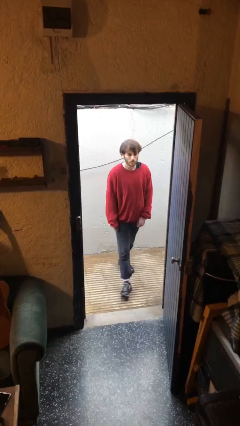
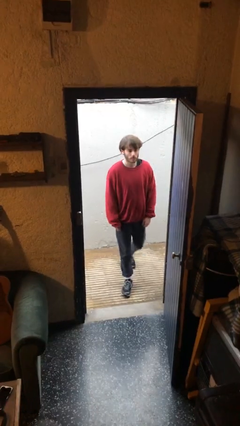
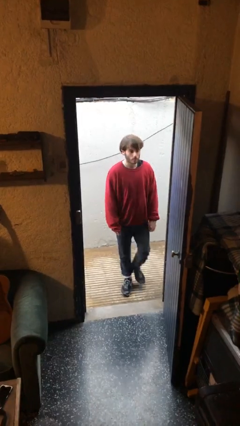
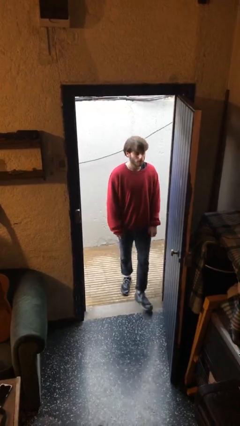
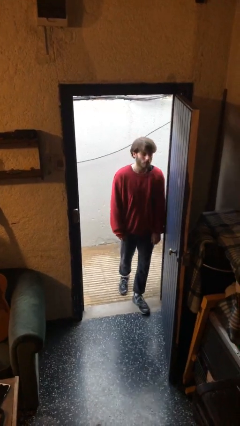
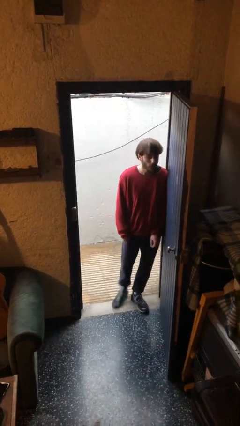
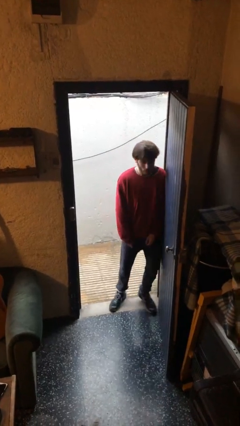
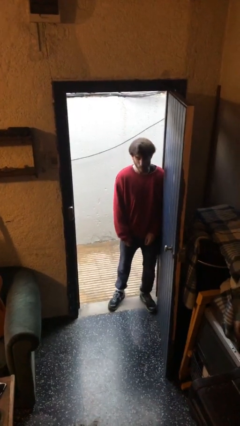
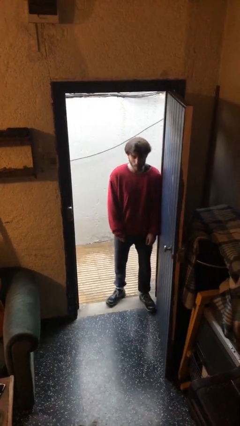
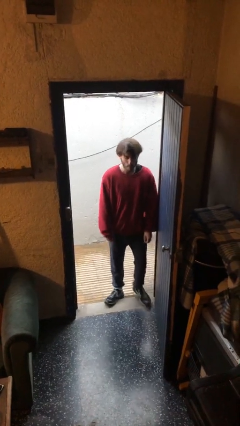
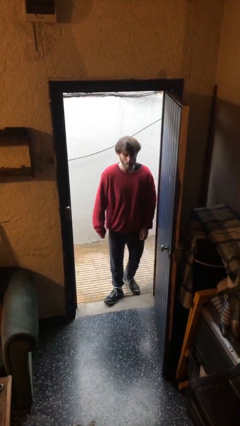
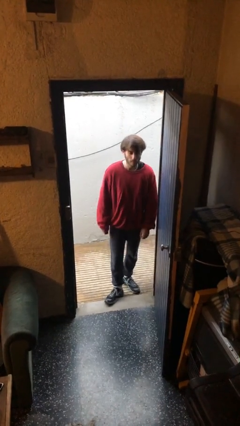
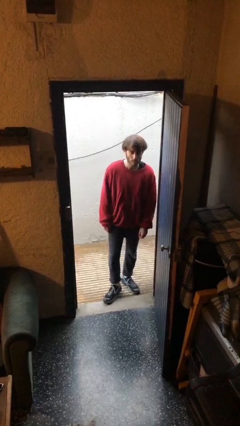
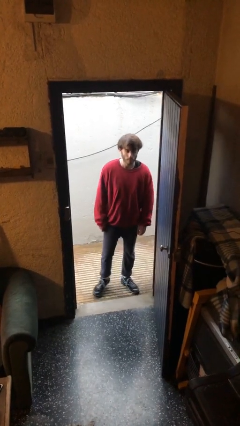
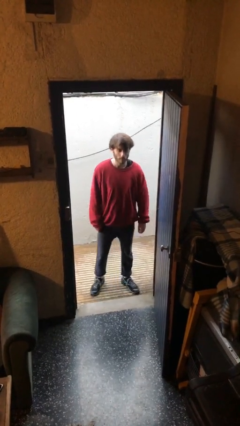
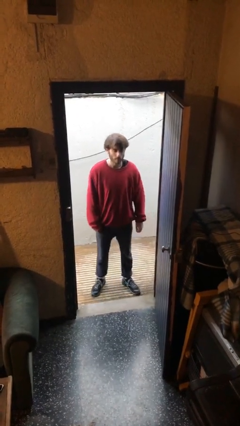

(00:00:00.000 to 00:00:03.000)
person bumps into wall

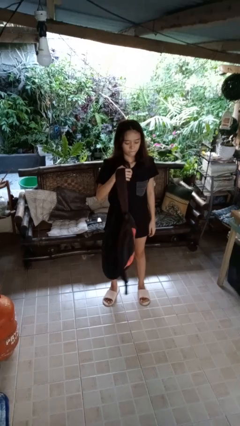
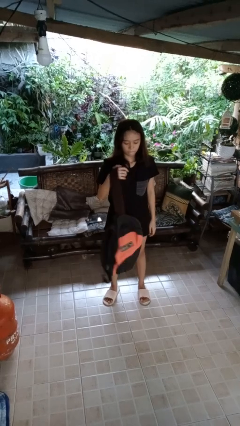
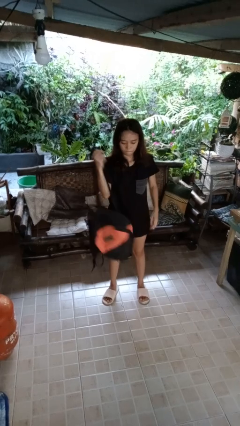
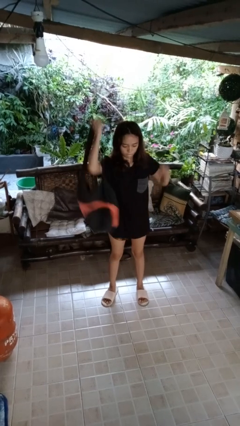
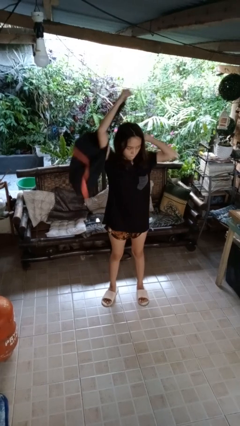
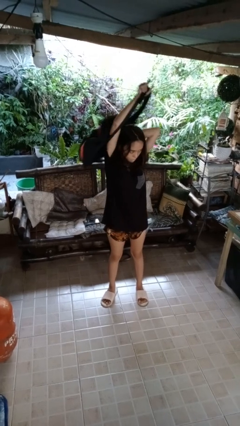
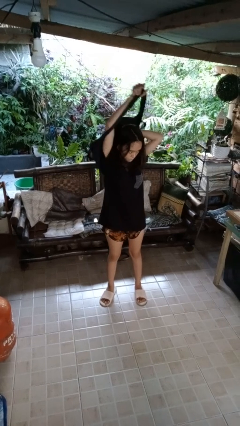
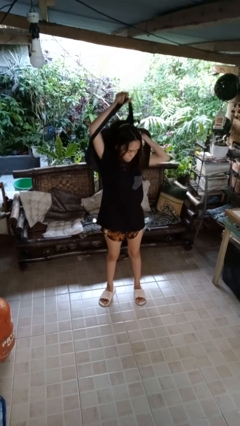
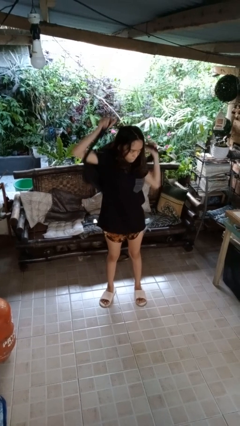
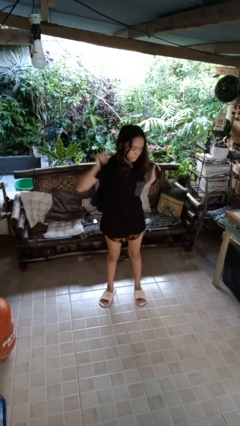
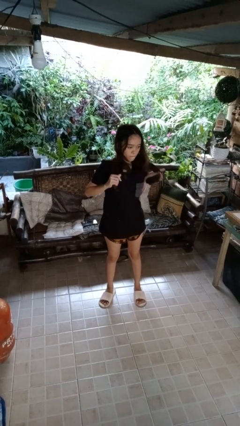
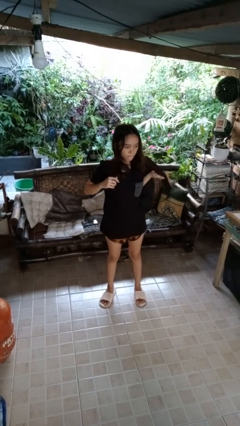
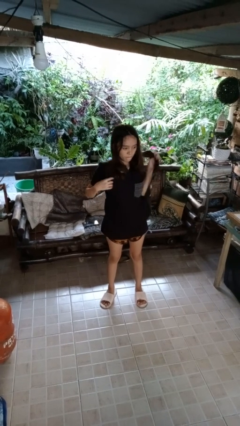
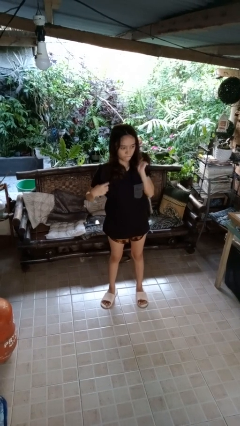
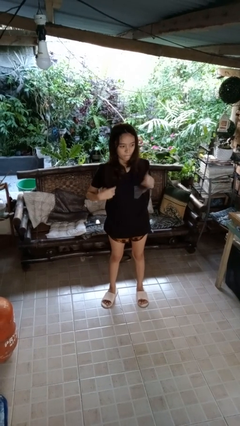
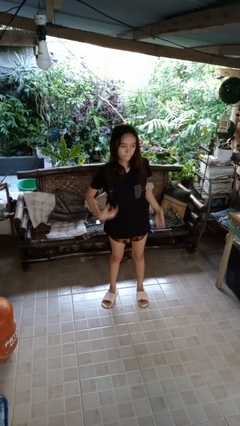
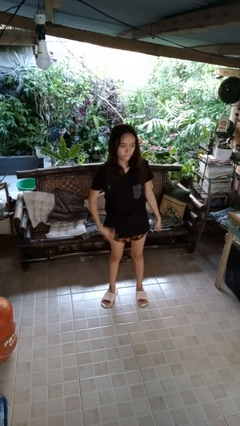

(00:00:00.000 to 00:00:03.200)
person puts on backpack

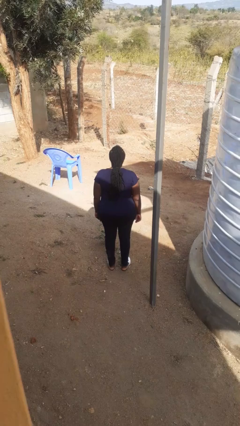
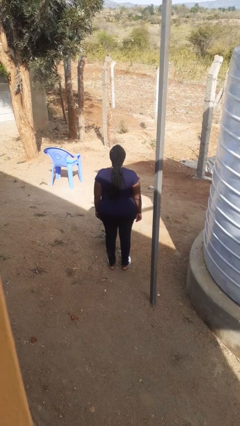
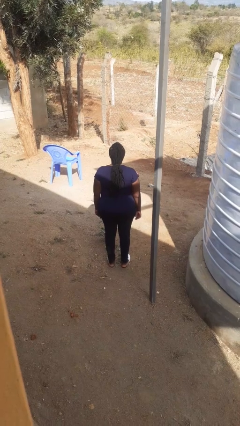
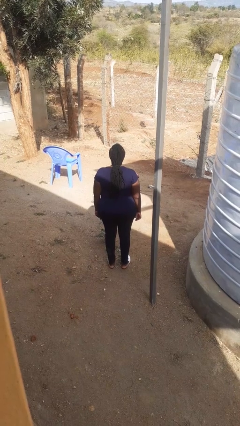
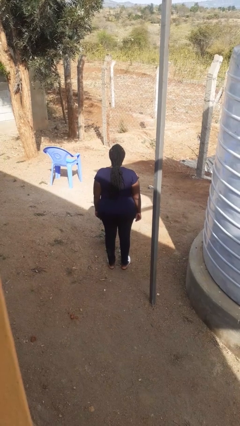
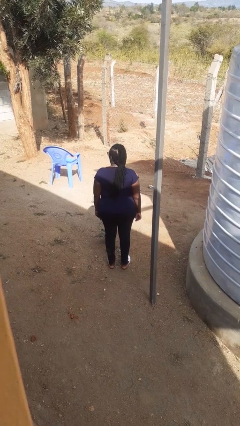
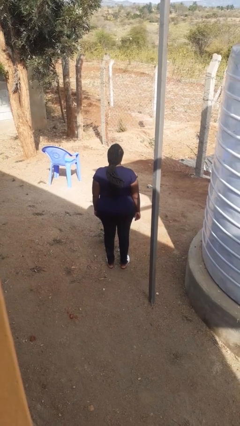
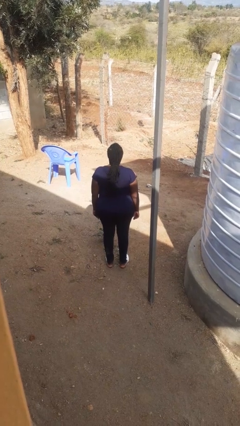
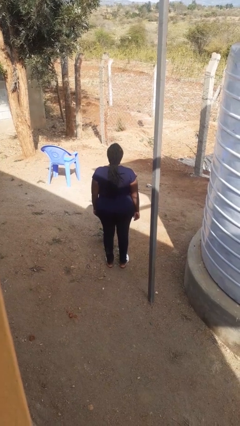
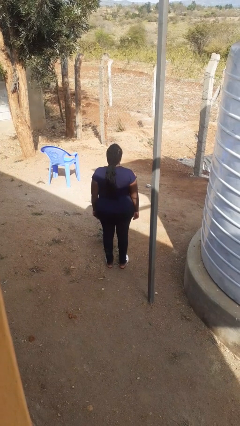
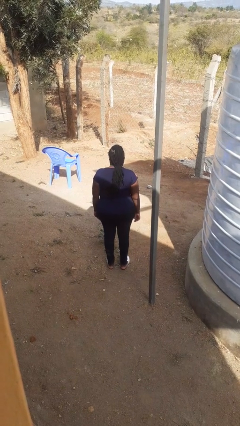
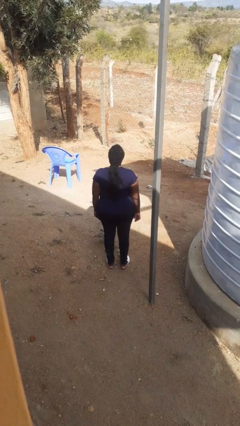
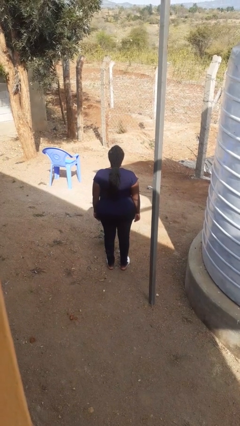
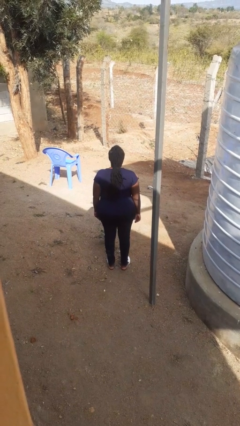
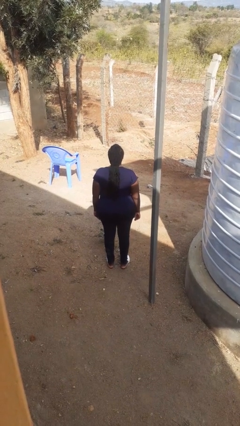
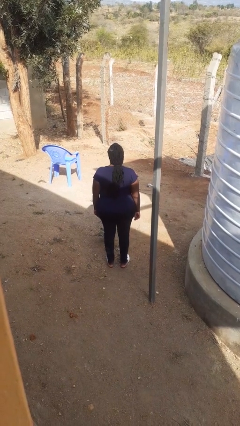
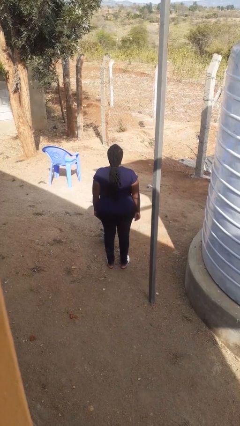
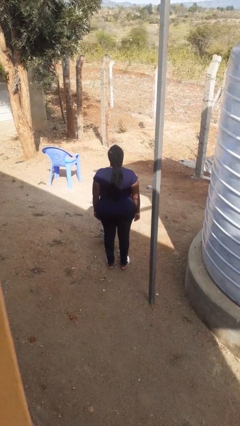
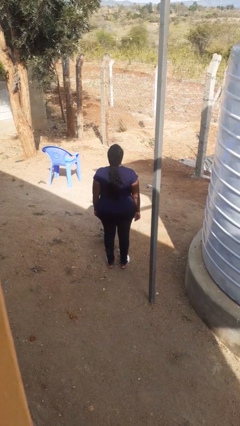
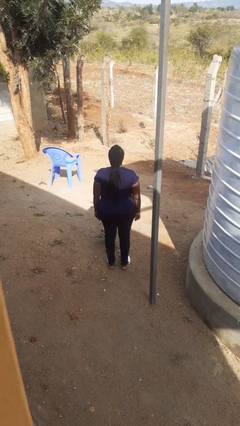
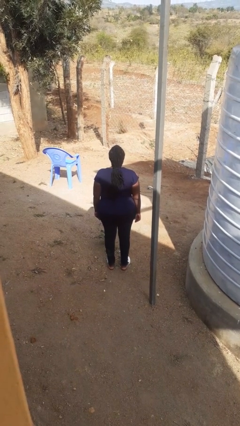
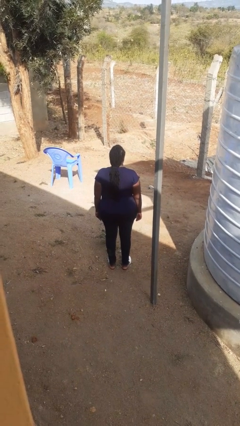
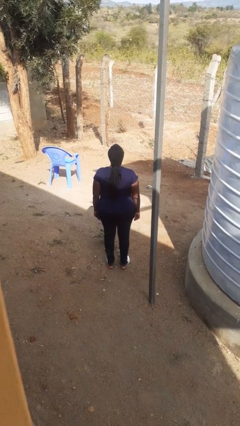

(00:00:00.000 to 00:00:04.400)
person shakes head

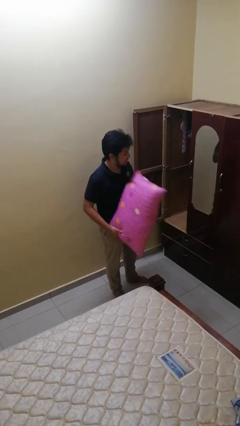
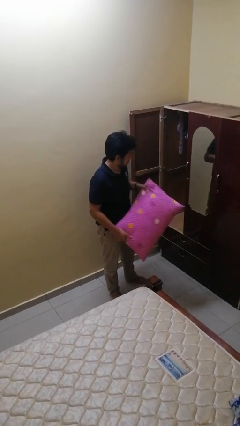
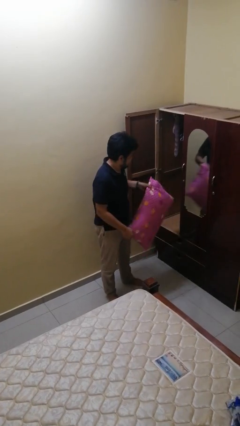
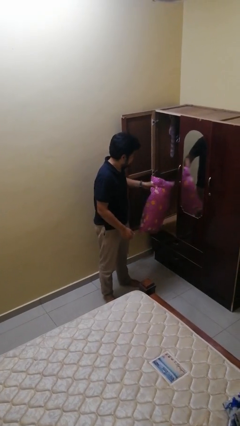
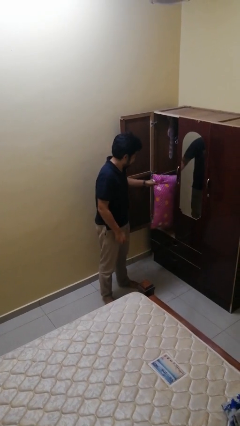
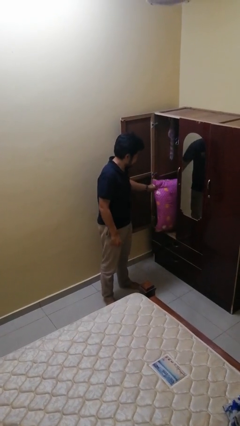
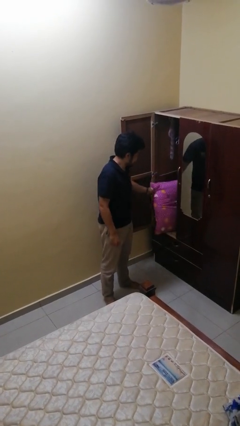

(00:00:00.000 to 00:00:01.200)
person puts down object into cabinet

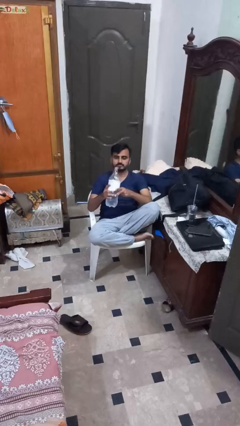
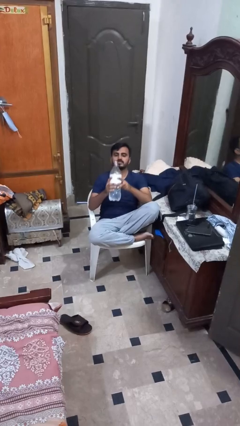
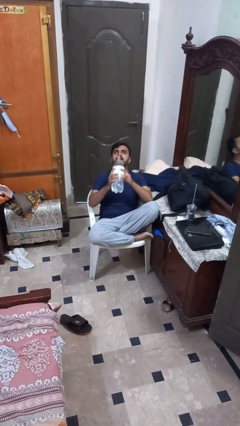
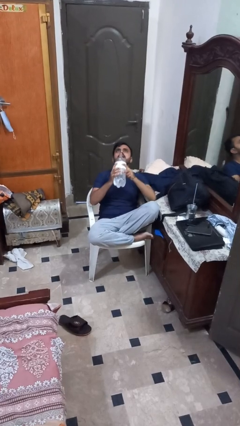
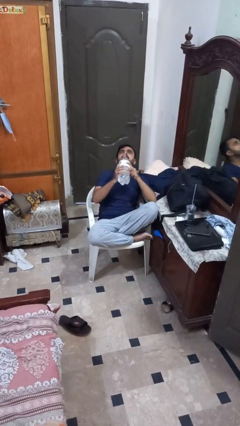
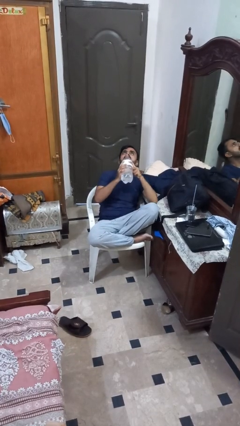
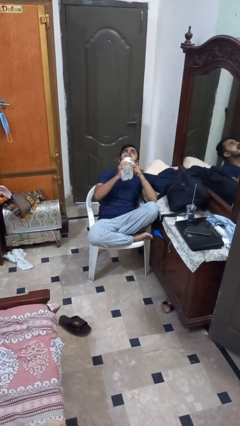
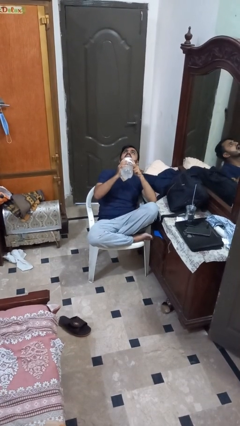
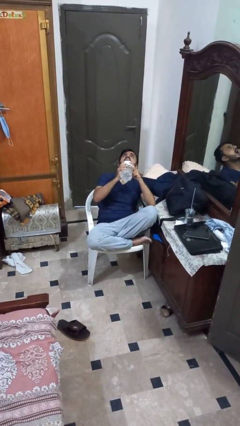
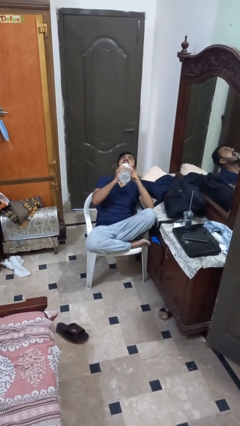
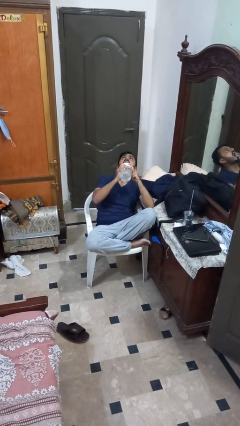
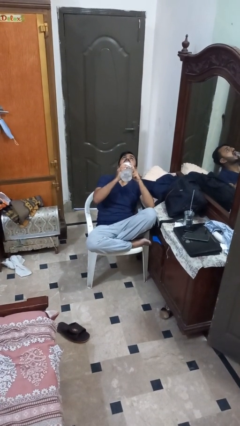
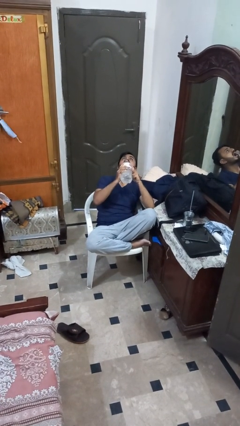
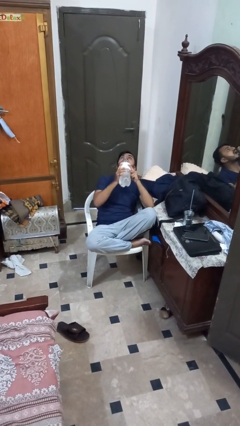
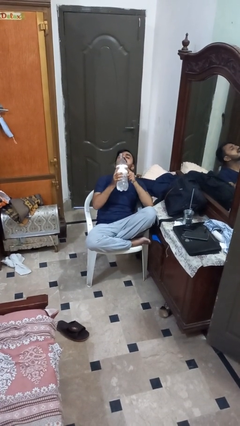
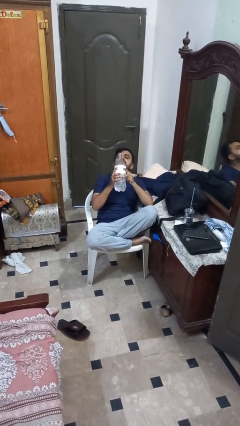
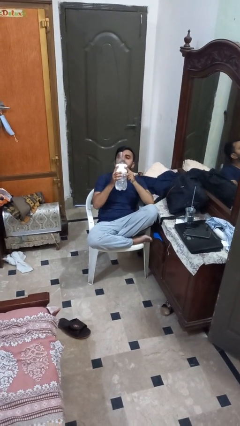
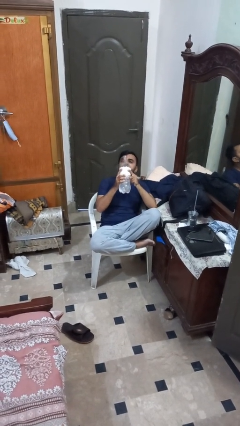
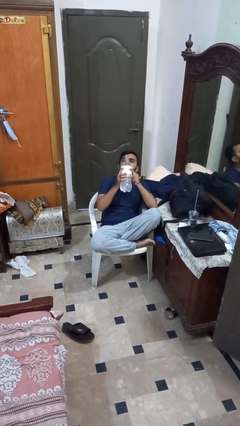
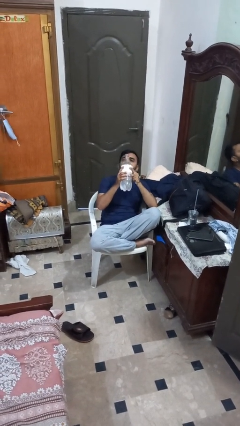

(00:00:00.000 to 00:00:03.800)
person drinks from bottle

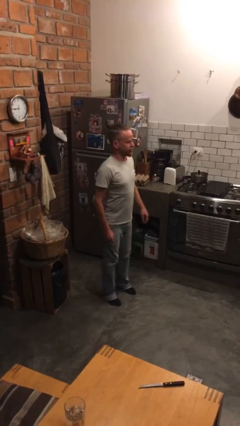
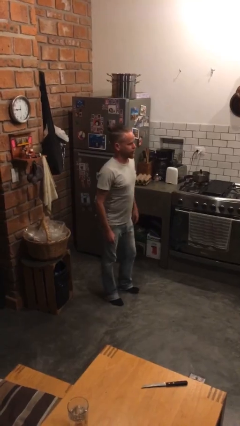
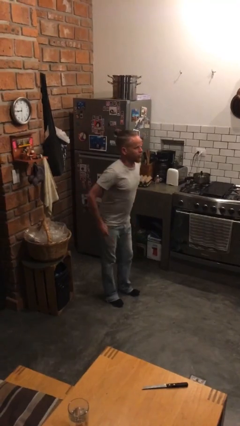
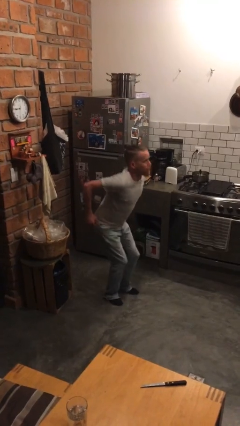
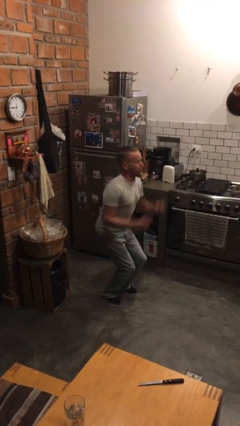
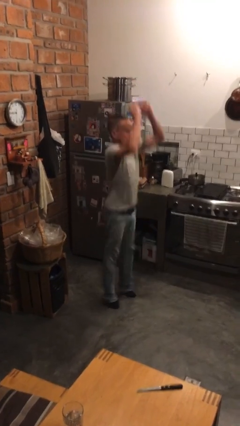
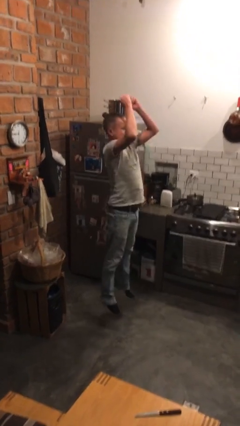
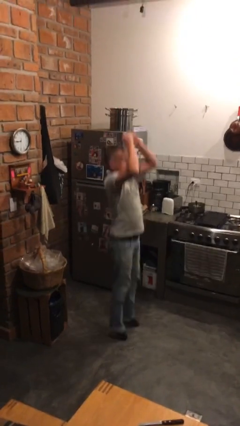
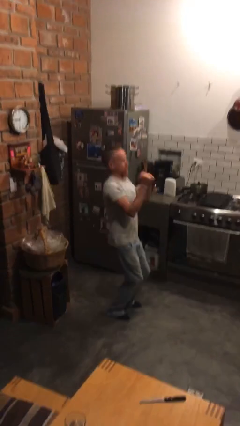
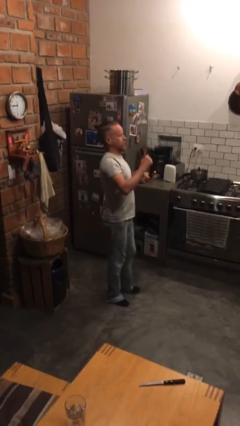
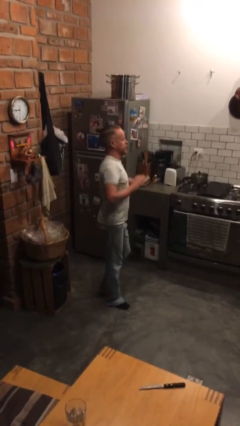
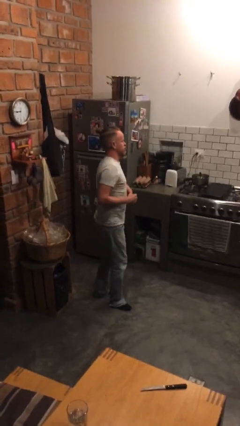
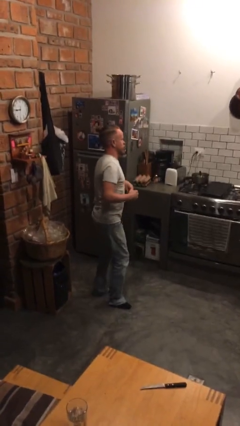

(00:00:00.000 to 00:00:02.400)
person jumps
